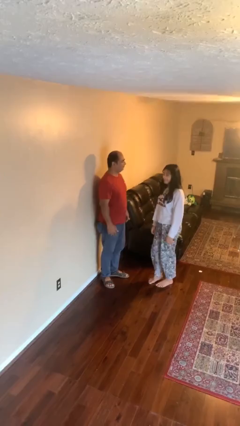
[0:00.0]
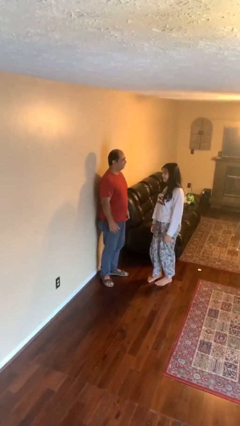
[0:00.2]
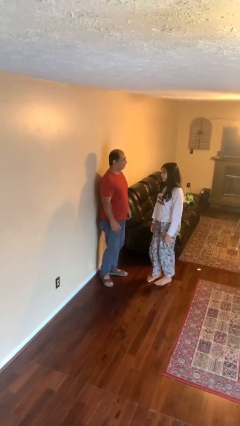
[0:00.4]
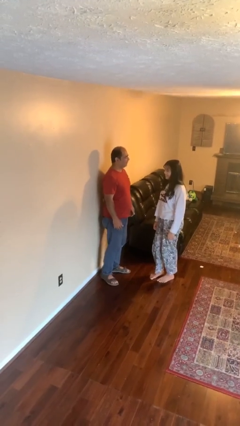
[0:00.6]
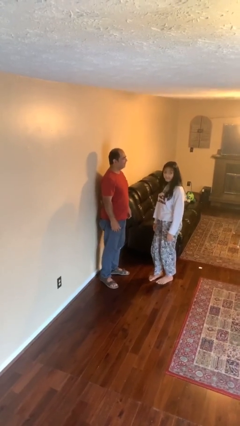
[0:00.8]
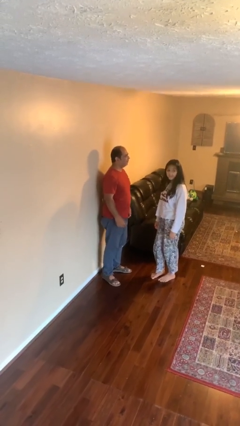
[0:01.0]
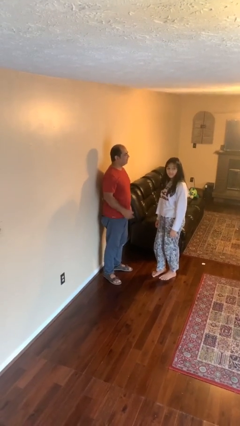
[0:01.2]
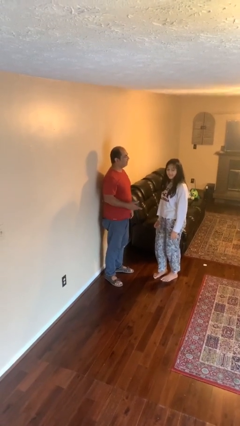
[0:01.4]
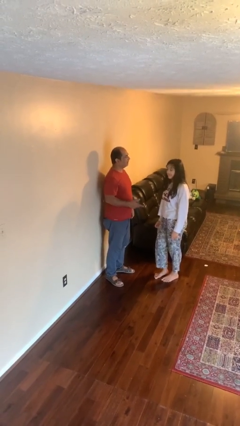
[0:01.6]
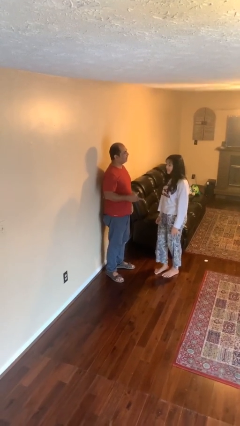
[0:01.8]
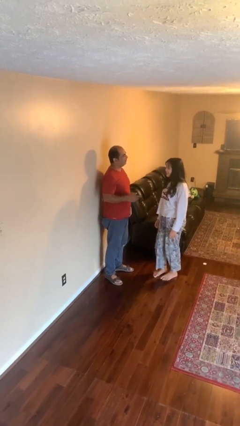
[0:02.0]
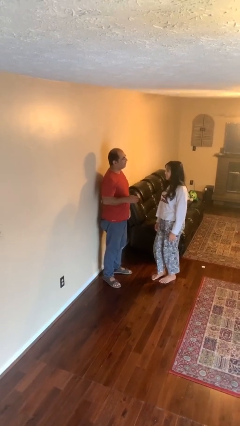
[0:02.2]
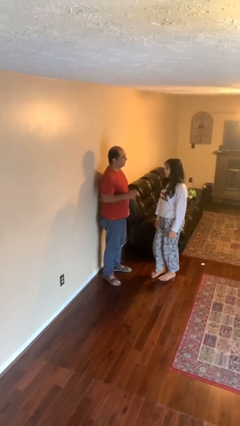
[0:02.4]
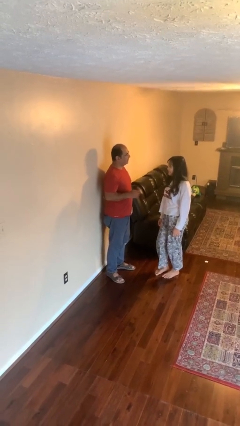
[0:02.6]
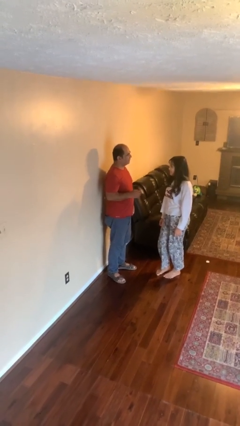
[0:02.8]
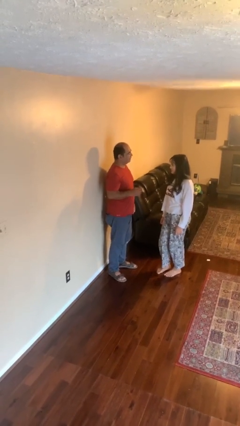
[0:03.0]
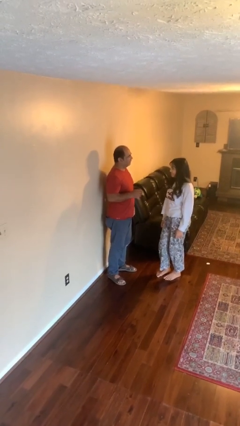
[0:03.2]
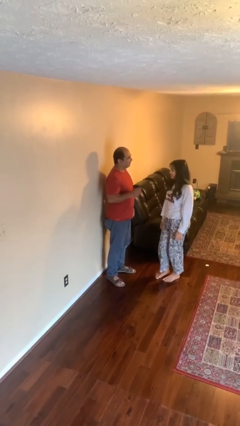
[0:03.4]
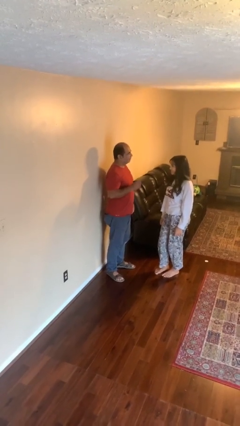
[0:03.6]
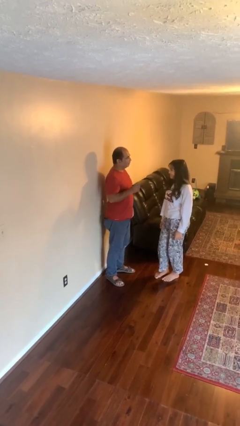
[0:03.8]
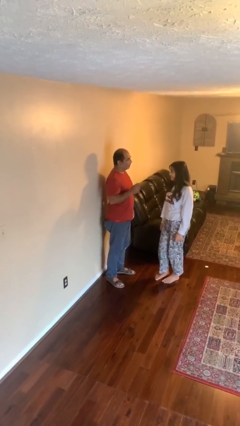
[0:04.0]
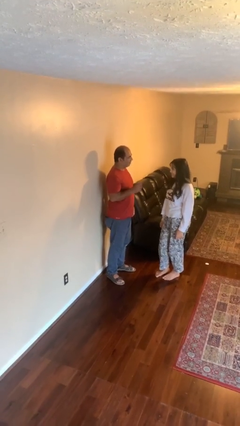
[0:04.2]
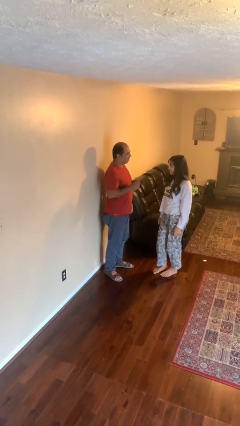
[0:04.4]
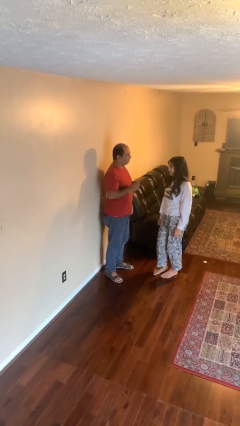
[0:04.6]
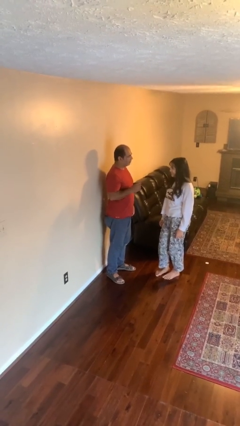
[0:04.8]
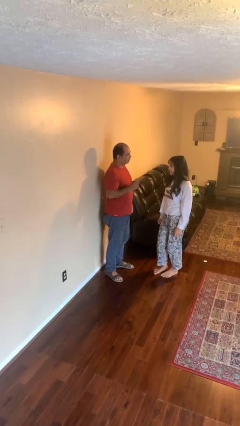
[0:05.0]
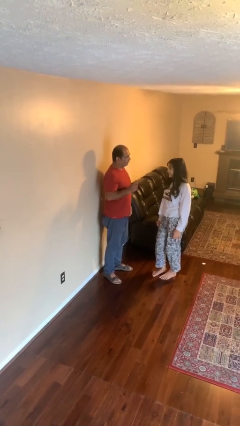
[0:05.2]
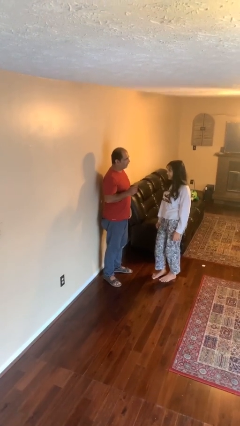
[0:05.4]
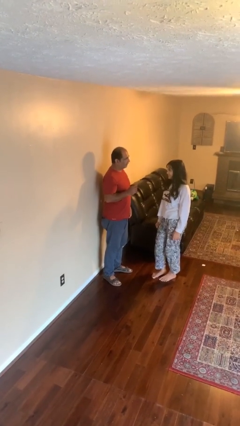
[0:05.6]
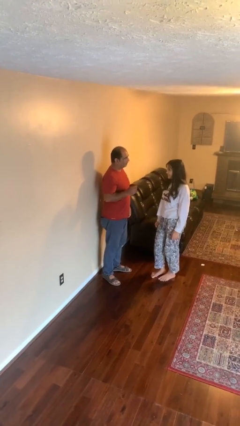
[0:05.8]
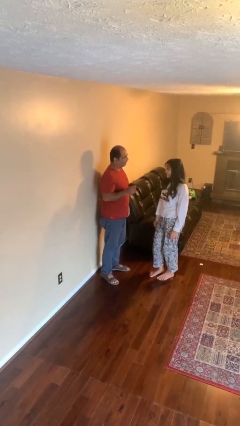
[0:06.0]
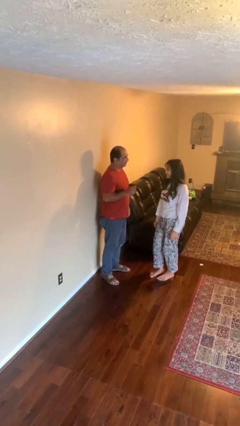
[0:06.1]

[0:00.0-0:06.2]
person talks to person

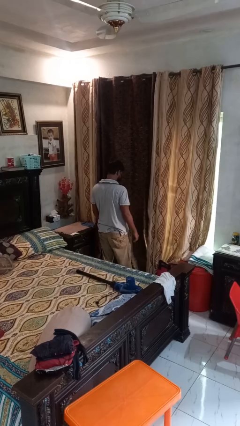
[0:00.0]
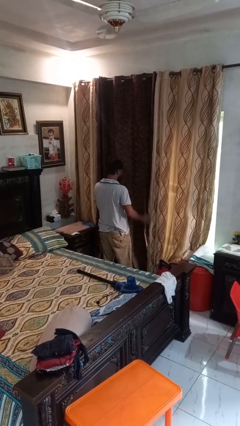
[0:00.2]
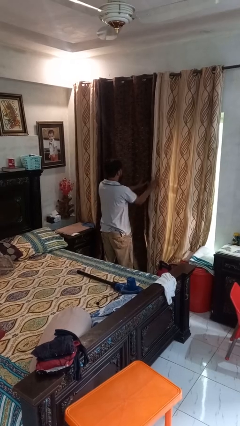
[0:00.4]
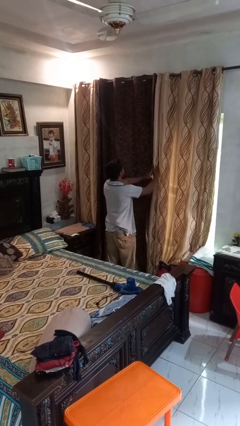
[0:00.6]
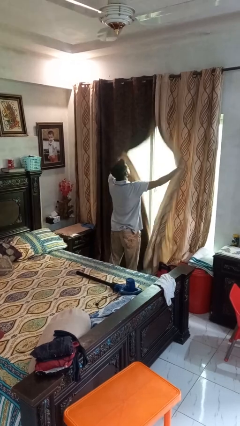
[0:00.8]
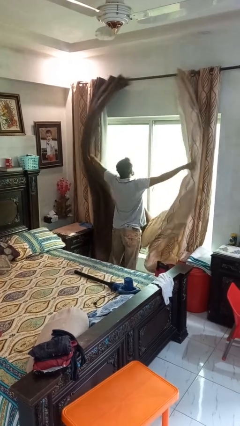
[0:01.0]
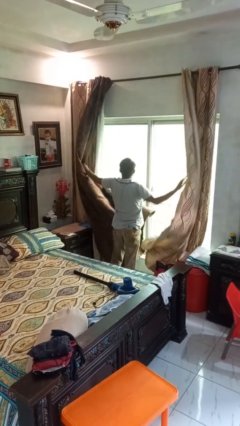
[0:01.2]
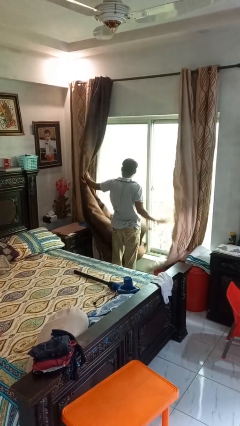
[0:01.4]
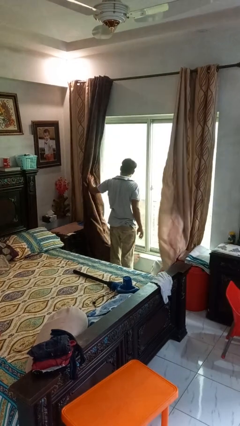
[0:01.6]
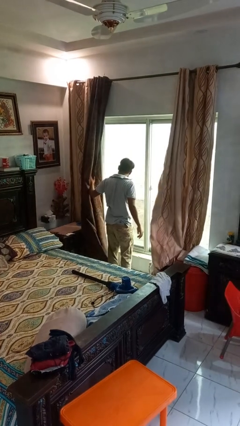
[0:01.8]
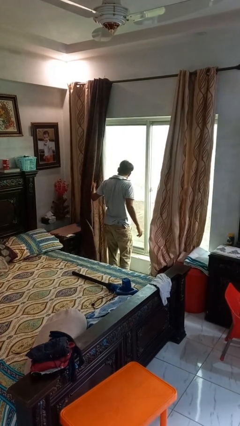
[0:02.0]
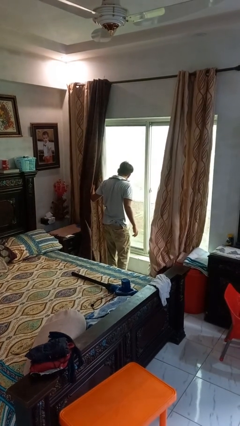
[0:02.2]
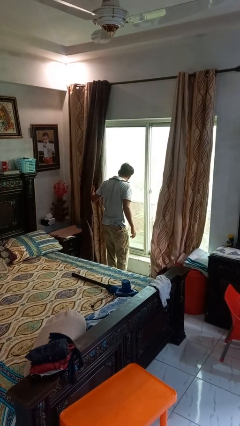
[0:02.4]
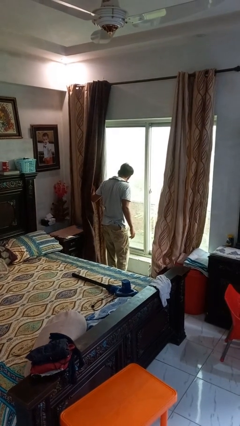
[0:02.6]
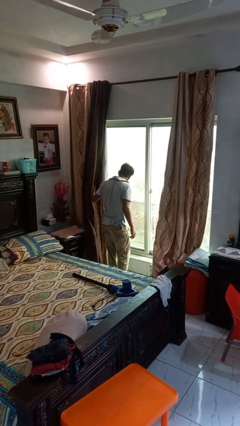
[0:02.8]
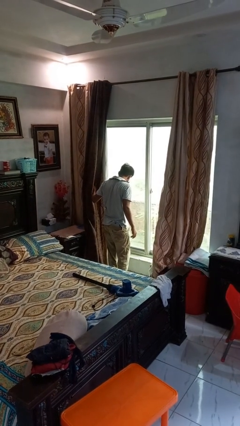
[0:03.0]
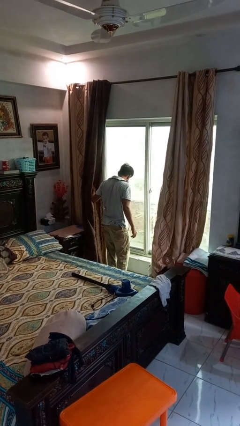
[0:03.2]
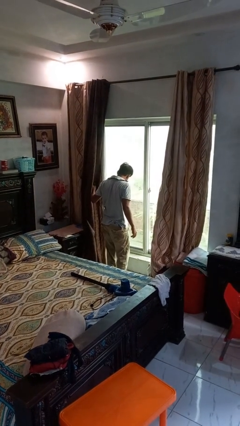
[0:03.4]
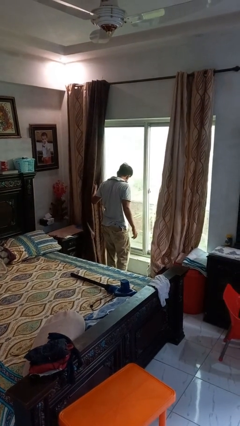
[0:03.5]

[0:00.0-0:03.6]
person opens curtains

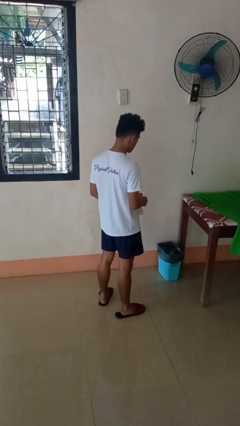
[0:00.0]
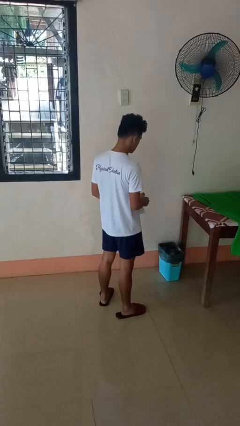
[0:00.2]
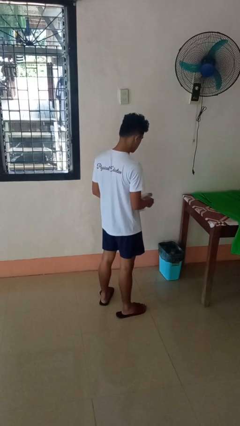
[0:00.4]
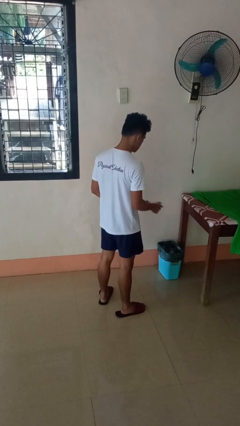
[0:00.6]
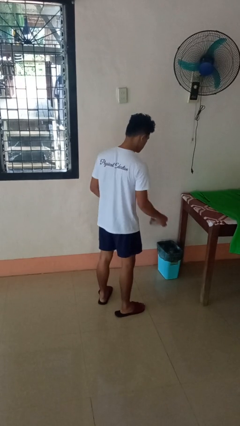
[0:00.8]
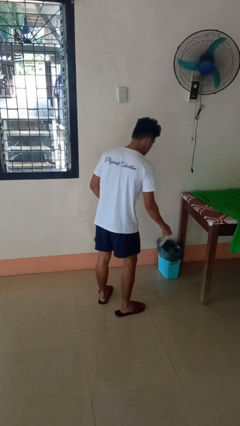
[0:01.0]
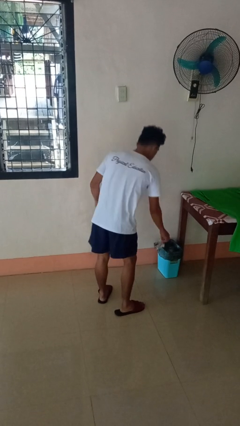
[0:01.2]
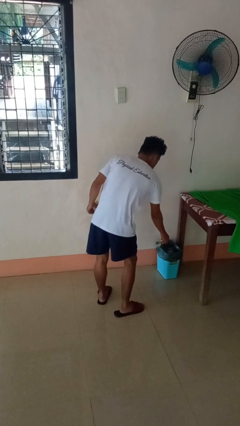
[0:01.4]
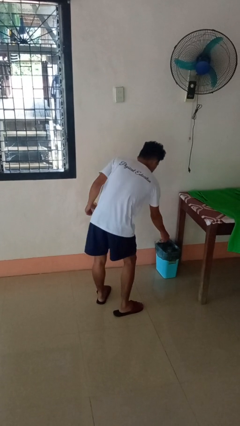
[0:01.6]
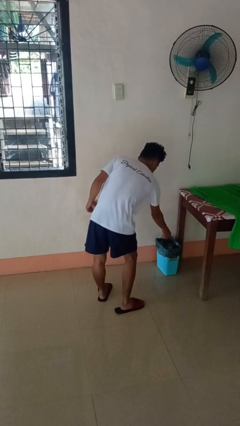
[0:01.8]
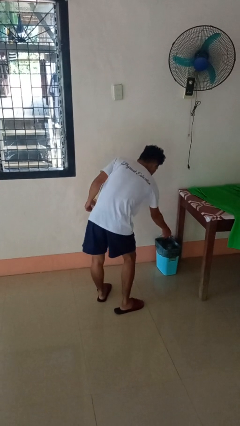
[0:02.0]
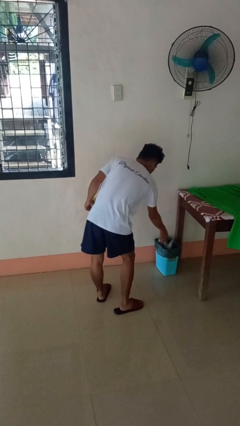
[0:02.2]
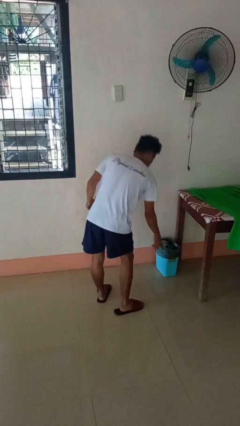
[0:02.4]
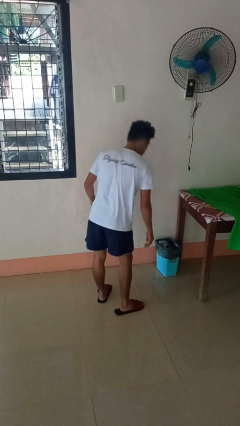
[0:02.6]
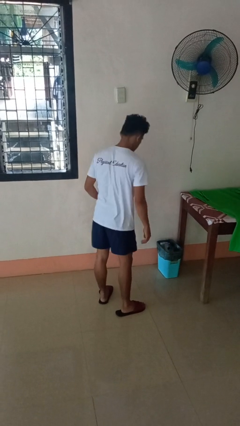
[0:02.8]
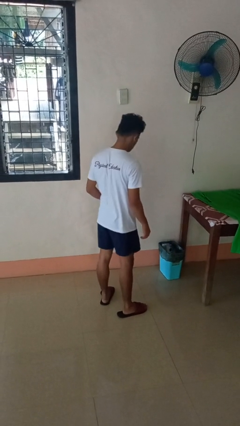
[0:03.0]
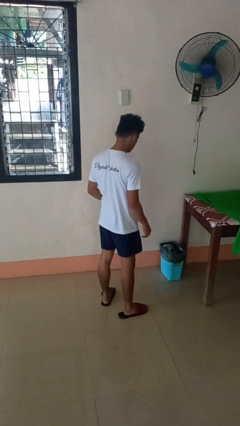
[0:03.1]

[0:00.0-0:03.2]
person discards trash

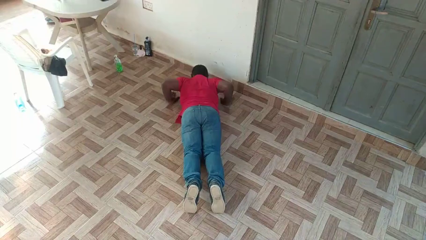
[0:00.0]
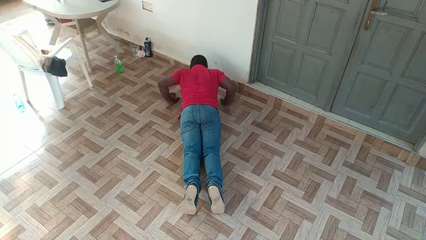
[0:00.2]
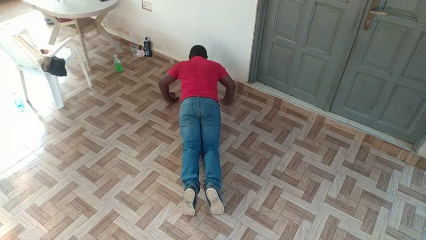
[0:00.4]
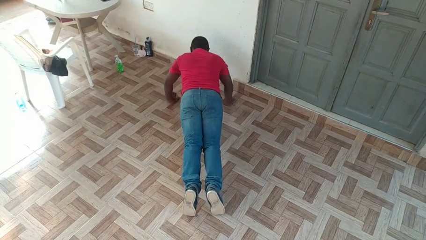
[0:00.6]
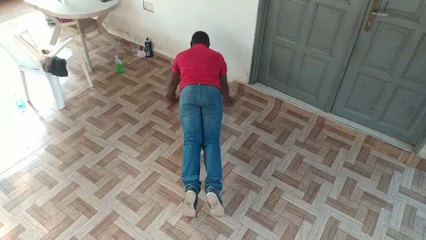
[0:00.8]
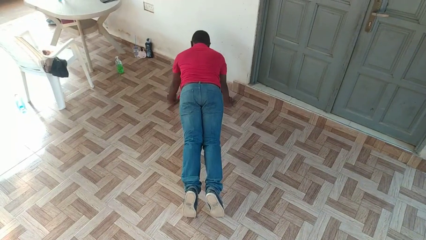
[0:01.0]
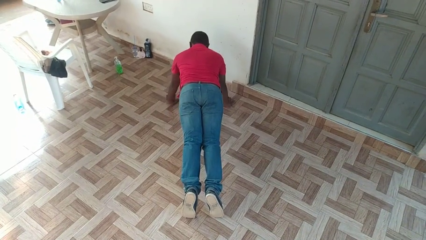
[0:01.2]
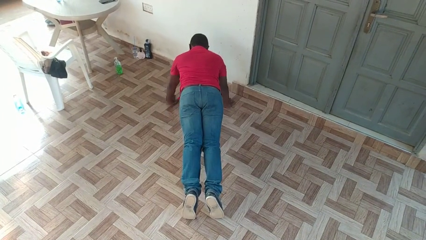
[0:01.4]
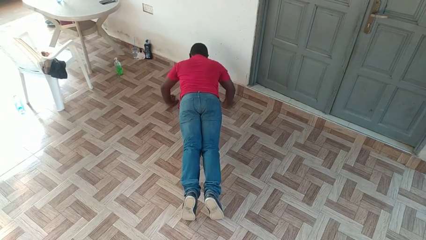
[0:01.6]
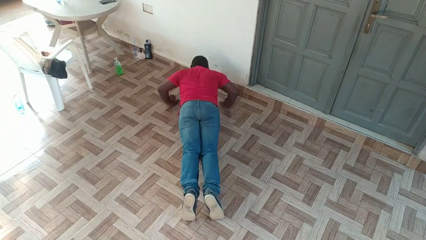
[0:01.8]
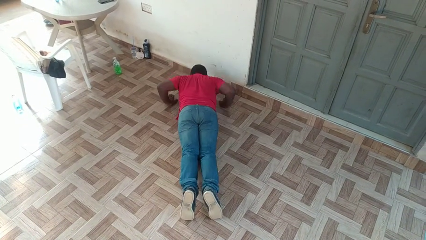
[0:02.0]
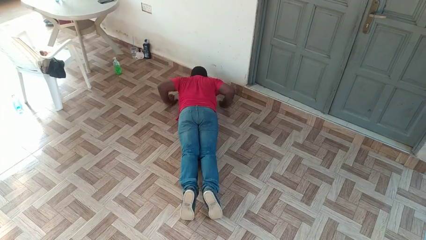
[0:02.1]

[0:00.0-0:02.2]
person exercises with pushup

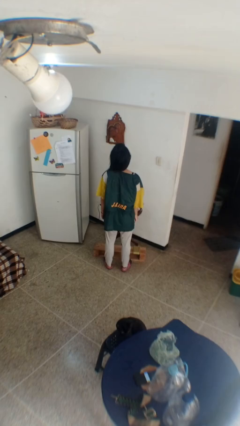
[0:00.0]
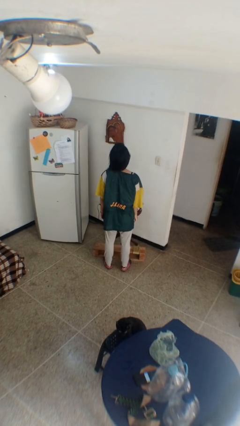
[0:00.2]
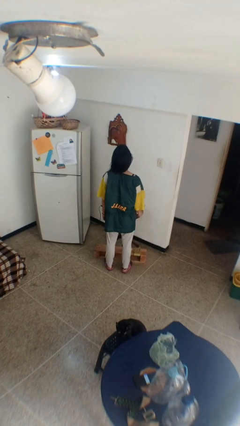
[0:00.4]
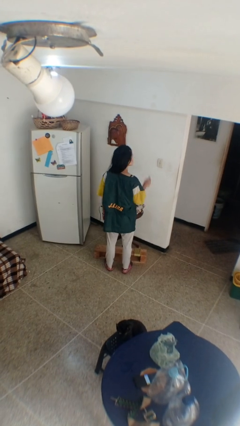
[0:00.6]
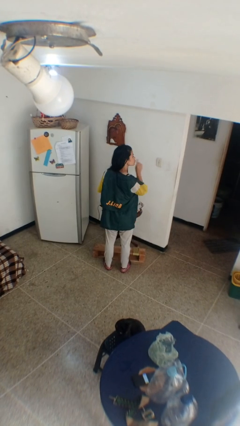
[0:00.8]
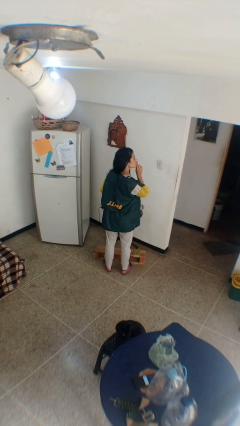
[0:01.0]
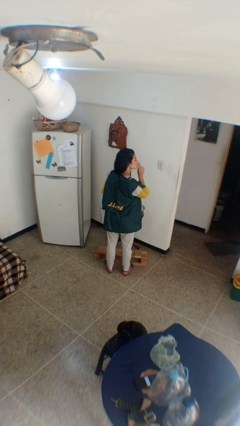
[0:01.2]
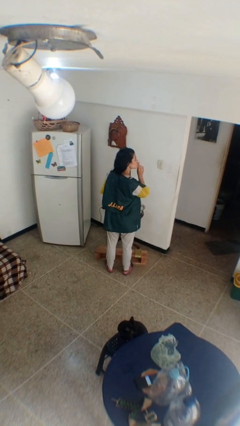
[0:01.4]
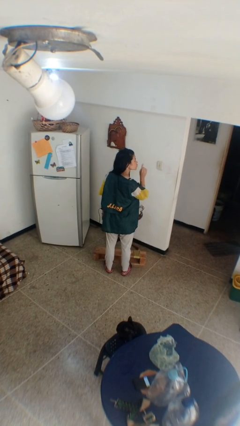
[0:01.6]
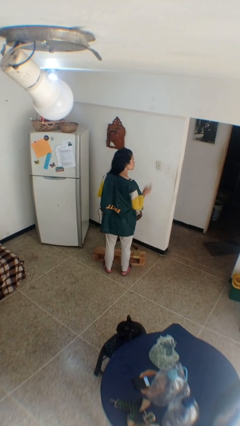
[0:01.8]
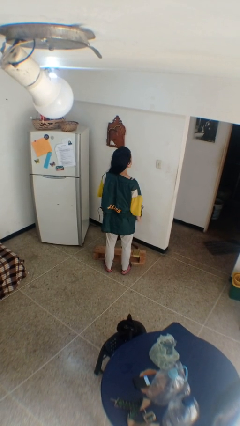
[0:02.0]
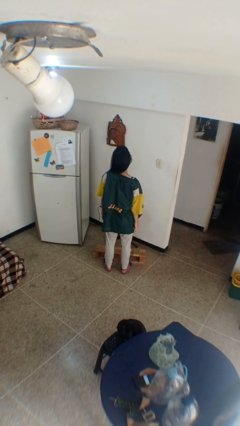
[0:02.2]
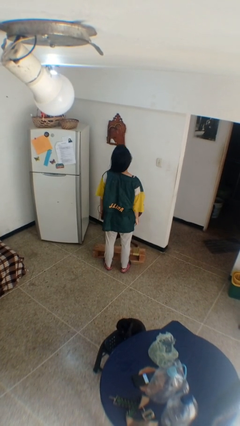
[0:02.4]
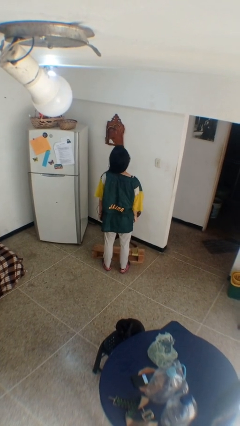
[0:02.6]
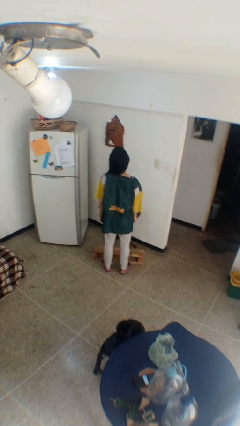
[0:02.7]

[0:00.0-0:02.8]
person gestures be quiet
